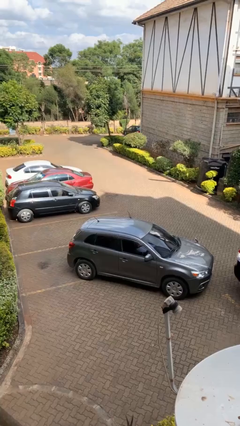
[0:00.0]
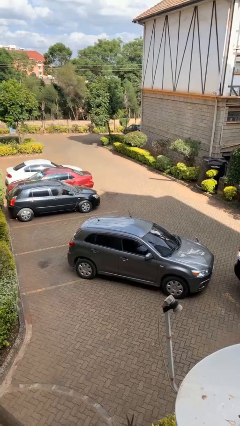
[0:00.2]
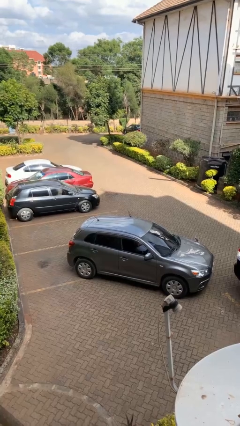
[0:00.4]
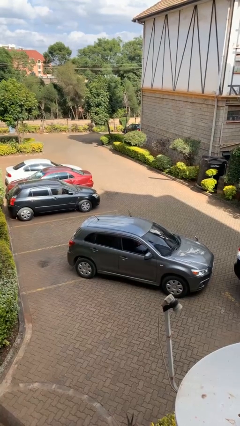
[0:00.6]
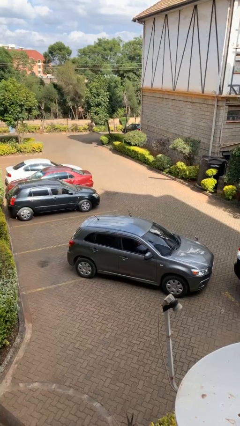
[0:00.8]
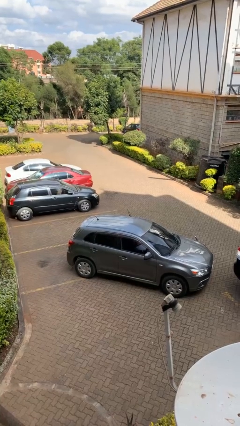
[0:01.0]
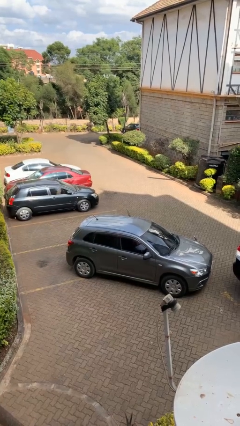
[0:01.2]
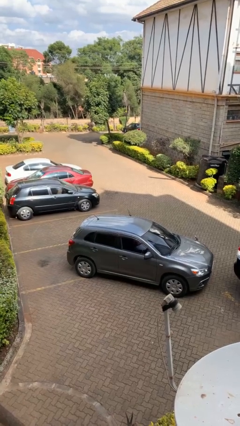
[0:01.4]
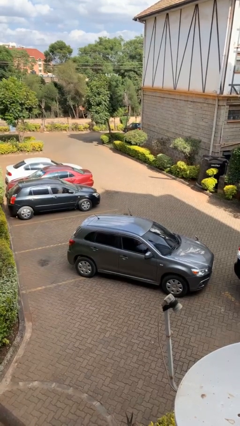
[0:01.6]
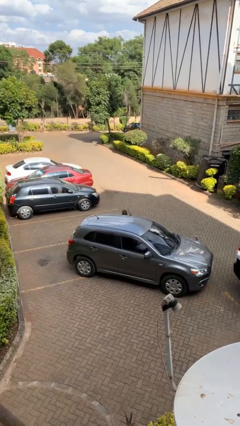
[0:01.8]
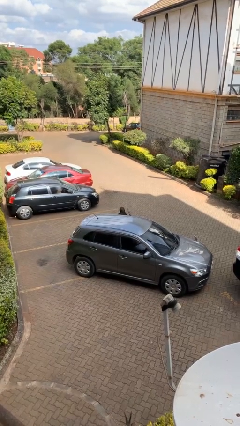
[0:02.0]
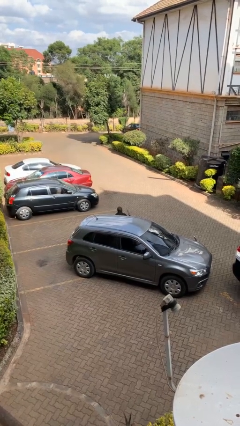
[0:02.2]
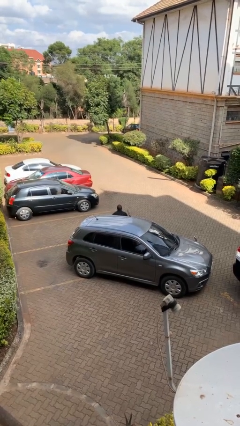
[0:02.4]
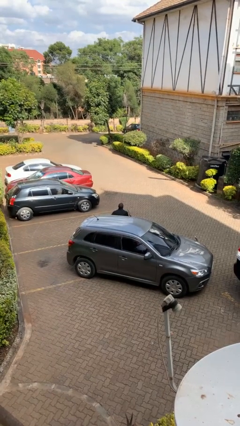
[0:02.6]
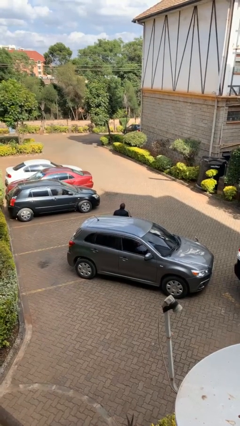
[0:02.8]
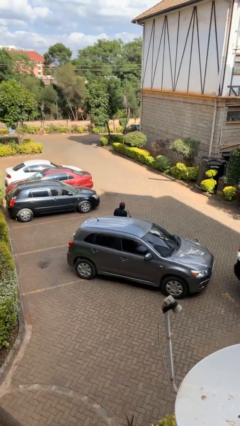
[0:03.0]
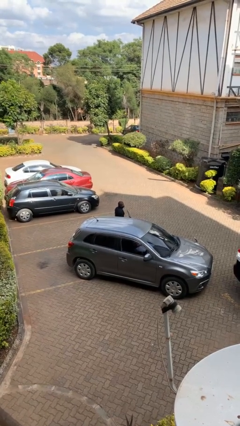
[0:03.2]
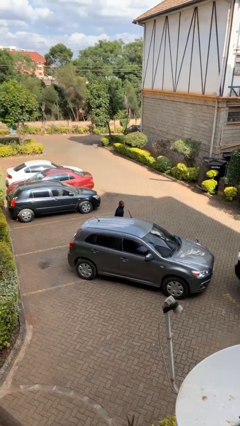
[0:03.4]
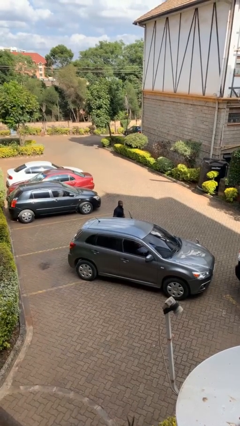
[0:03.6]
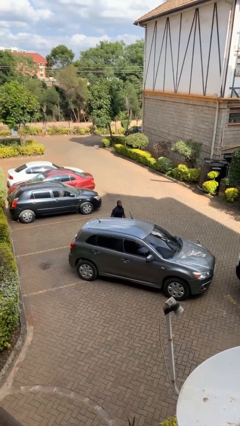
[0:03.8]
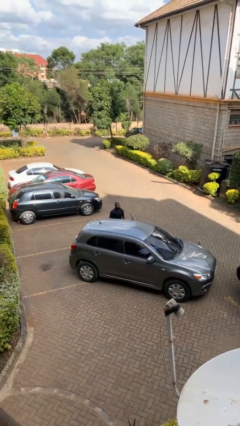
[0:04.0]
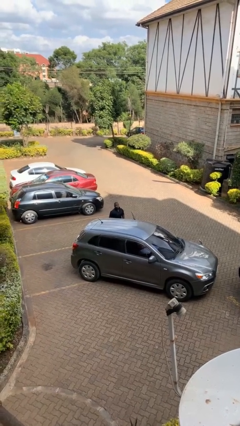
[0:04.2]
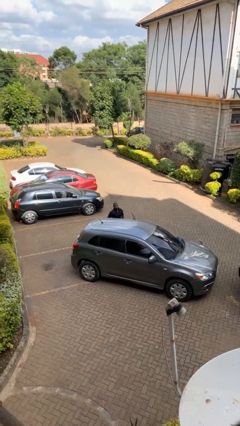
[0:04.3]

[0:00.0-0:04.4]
person exits car

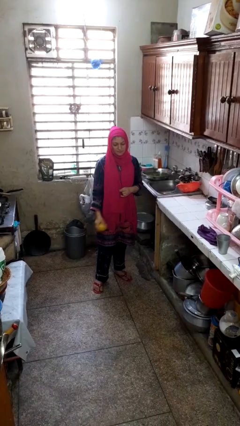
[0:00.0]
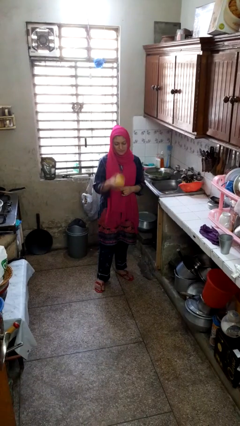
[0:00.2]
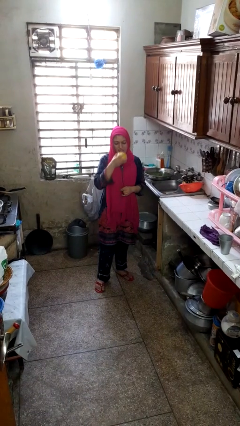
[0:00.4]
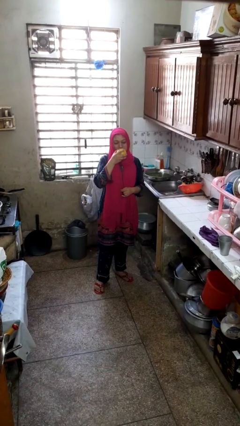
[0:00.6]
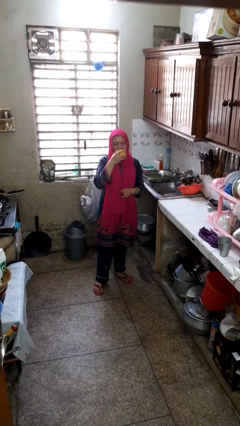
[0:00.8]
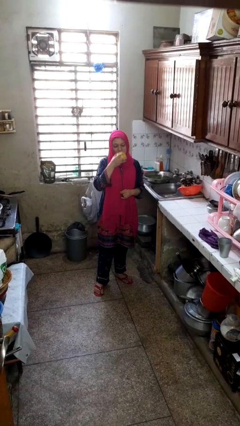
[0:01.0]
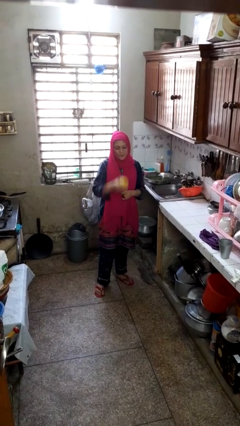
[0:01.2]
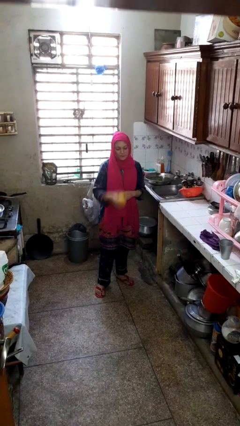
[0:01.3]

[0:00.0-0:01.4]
person eats apple

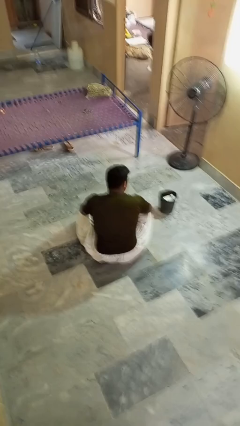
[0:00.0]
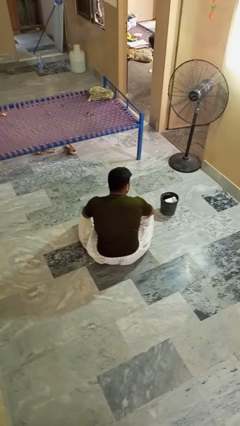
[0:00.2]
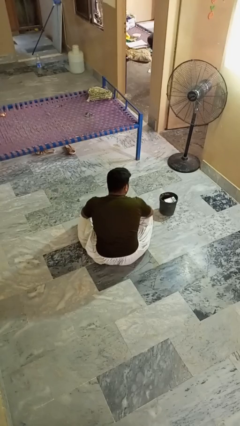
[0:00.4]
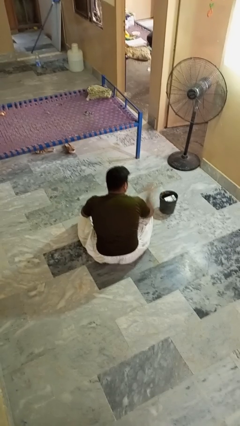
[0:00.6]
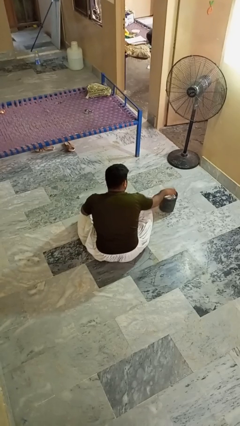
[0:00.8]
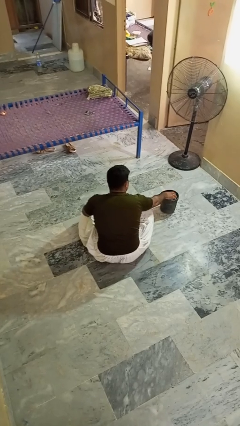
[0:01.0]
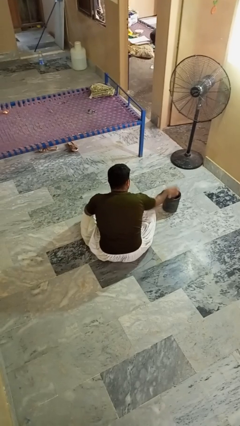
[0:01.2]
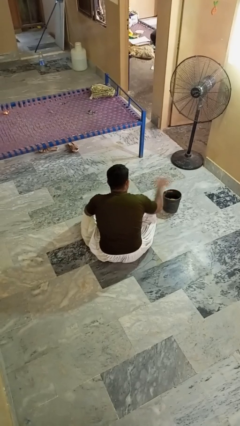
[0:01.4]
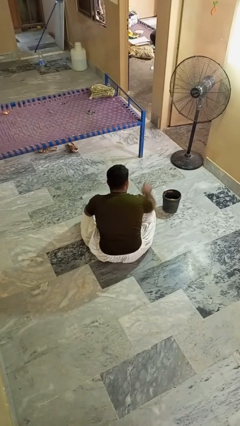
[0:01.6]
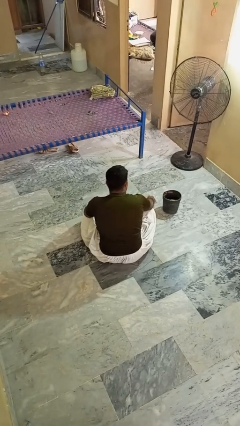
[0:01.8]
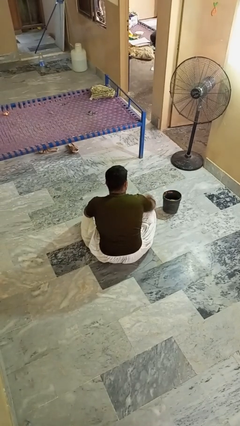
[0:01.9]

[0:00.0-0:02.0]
person takes object from basket

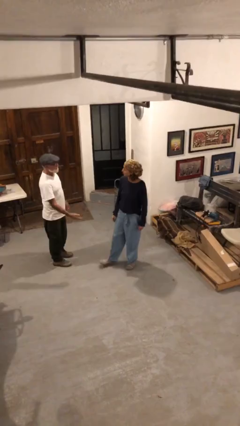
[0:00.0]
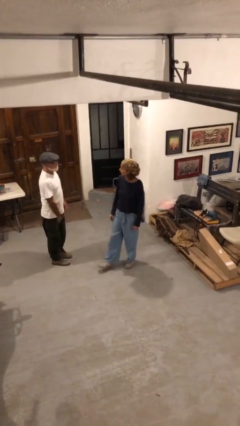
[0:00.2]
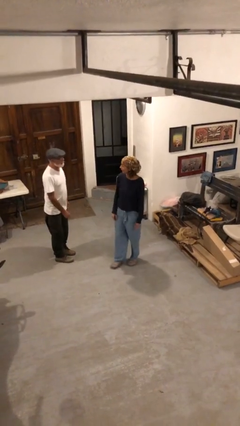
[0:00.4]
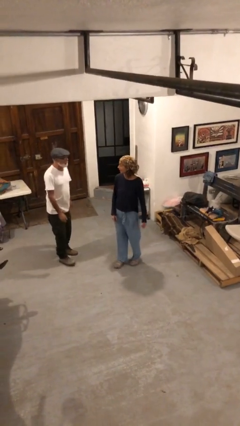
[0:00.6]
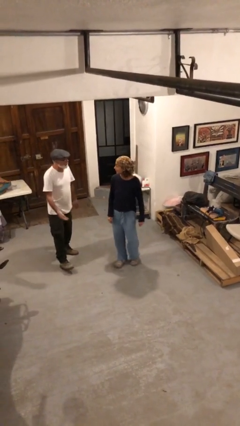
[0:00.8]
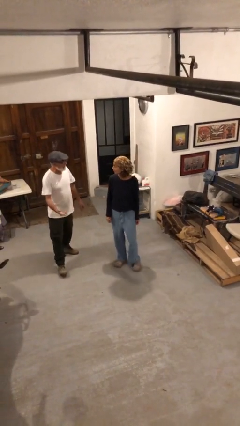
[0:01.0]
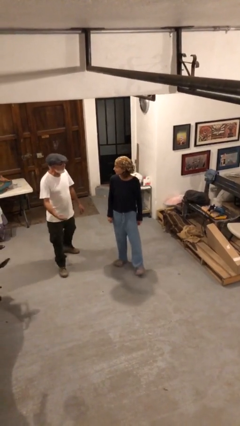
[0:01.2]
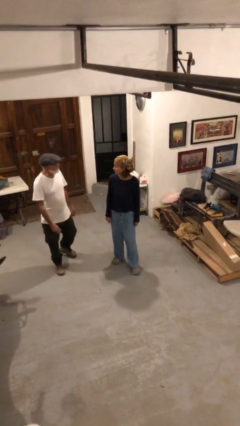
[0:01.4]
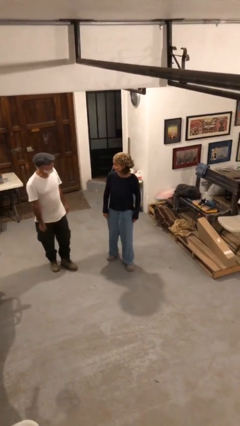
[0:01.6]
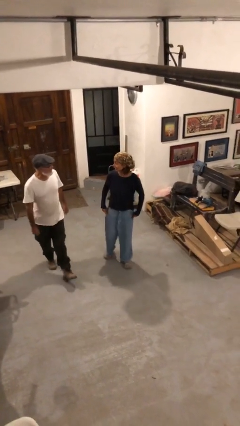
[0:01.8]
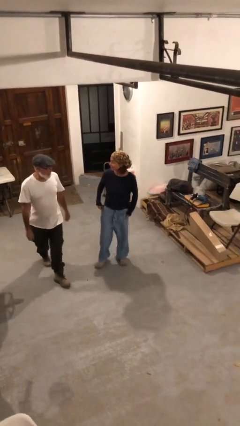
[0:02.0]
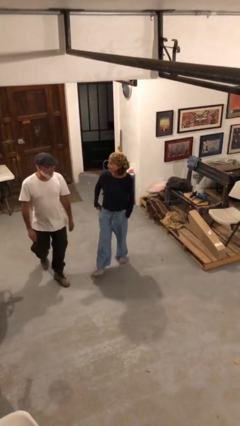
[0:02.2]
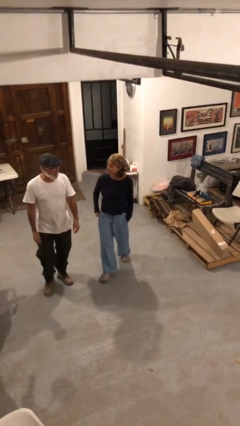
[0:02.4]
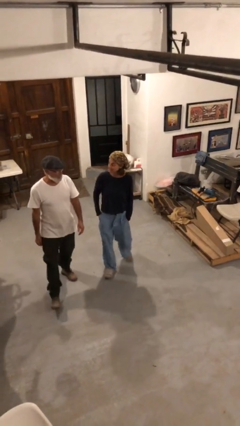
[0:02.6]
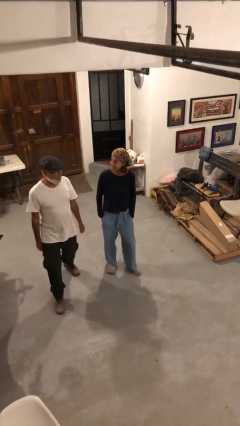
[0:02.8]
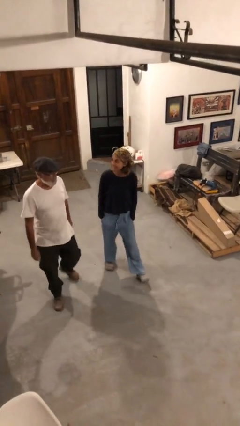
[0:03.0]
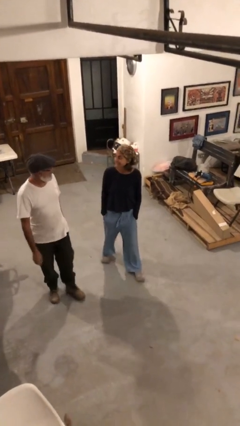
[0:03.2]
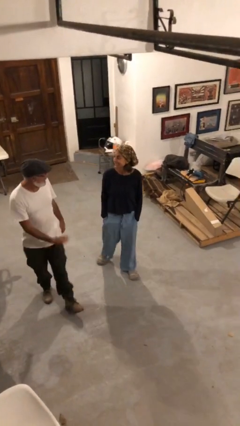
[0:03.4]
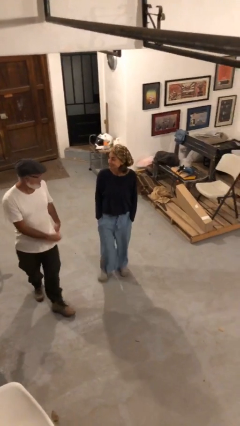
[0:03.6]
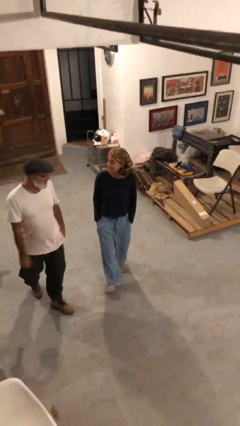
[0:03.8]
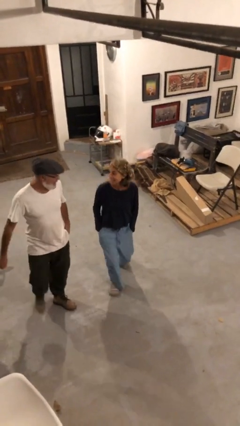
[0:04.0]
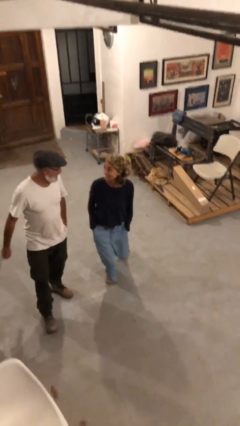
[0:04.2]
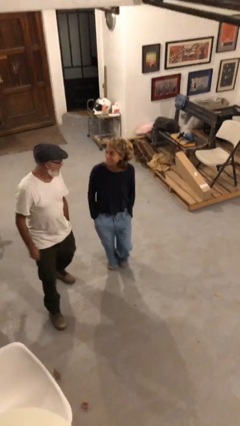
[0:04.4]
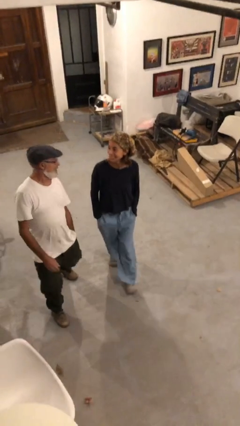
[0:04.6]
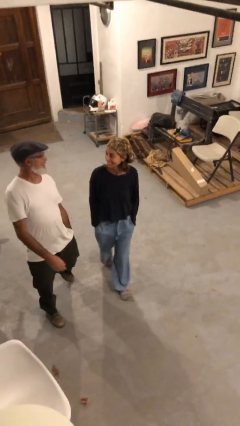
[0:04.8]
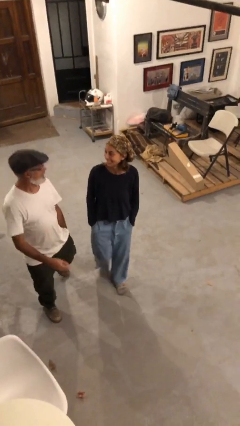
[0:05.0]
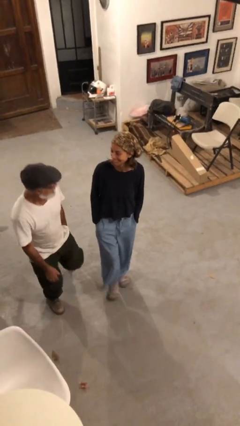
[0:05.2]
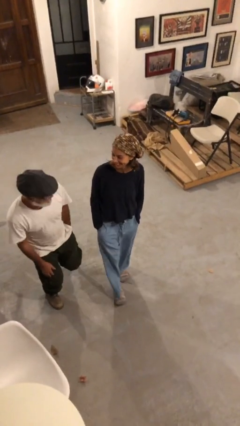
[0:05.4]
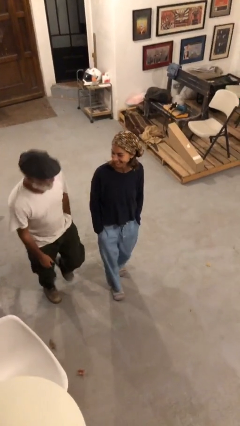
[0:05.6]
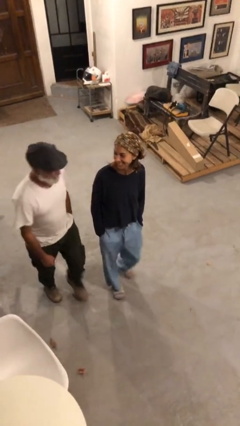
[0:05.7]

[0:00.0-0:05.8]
person talks to person

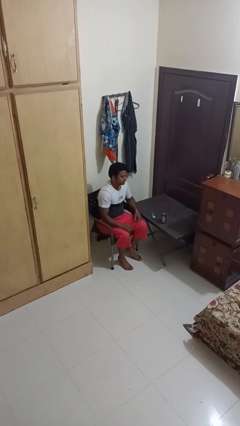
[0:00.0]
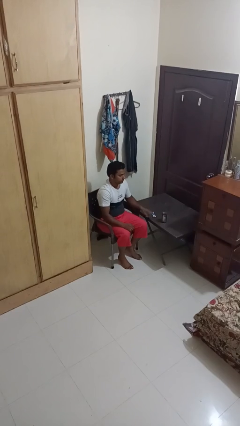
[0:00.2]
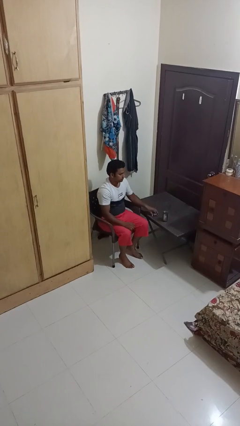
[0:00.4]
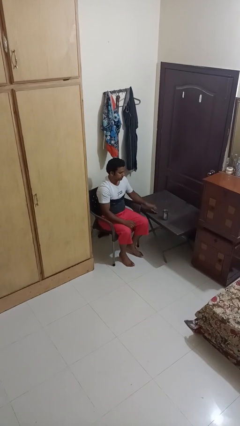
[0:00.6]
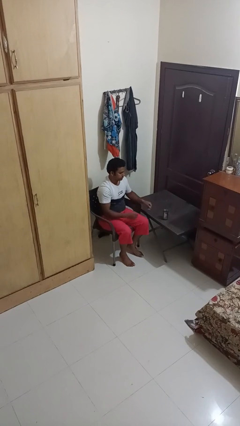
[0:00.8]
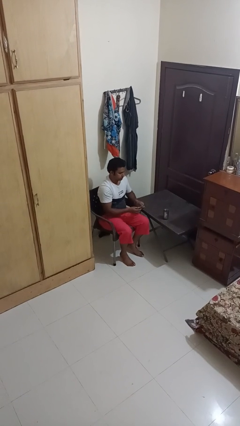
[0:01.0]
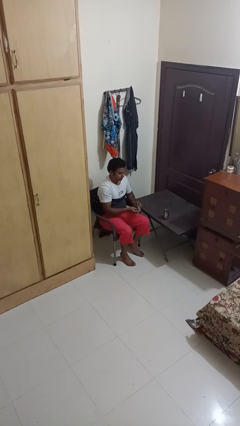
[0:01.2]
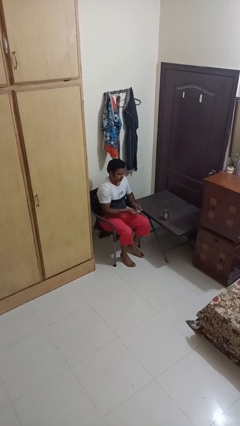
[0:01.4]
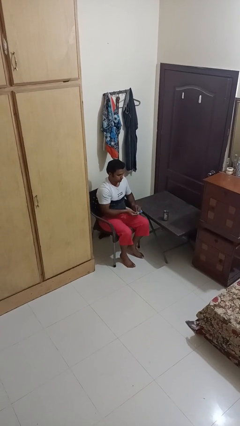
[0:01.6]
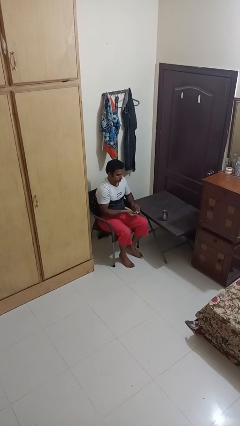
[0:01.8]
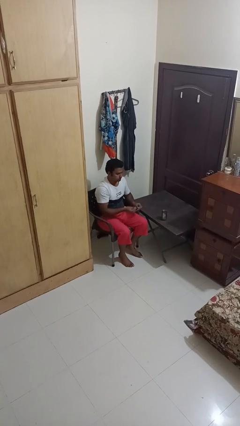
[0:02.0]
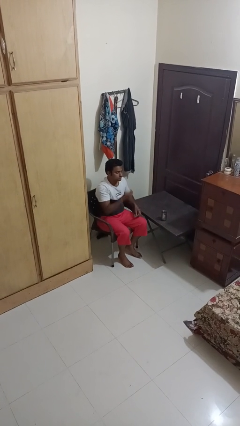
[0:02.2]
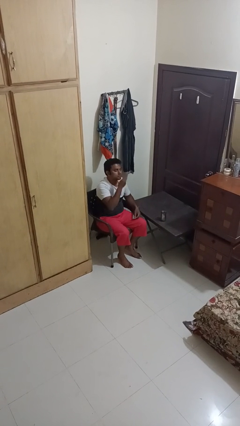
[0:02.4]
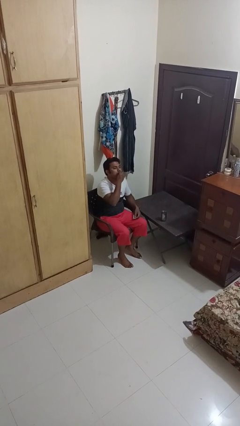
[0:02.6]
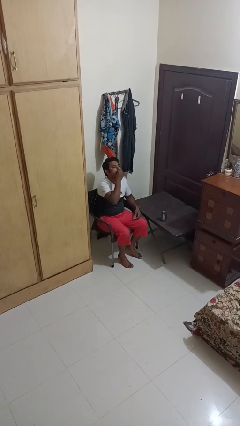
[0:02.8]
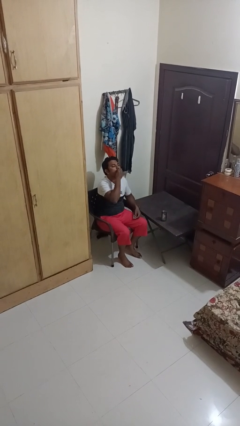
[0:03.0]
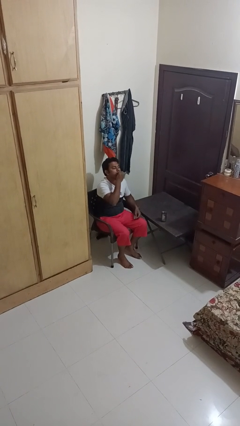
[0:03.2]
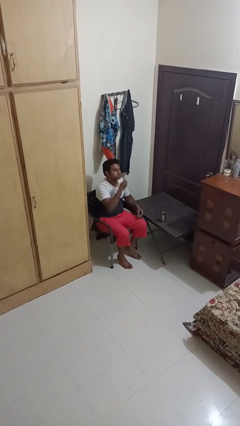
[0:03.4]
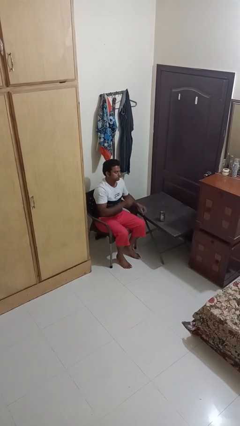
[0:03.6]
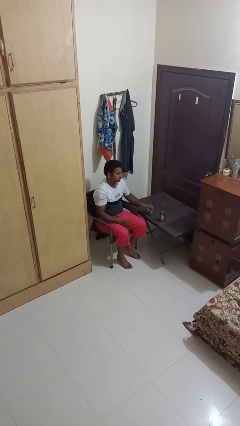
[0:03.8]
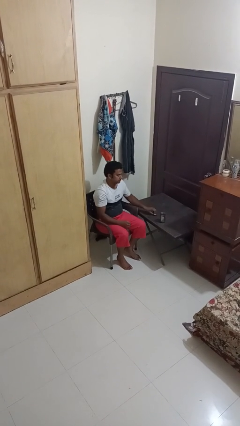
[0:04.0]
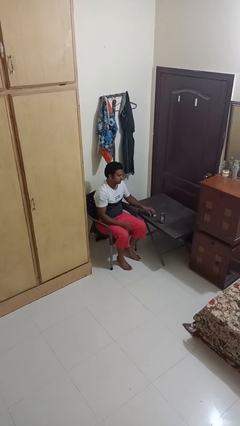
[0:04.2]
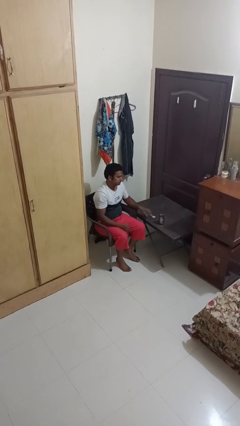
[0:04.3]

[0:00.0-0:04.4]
person takes medicine pills
